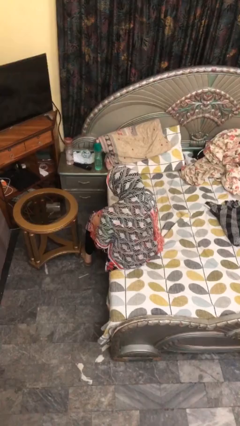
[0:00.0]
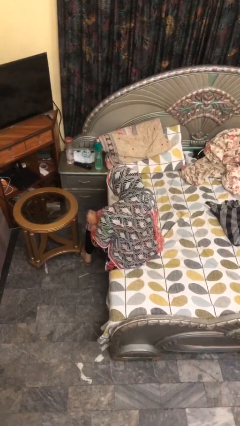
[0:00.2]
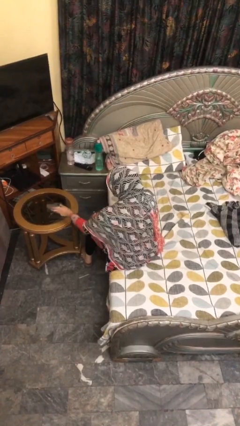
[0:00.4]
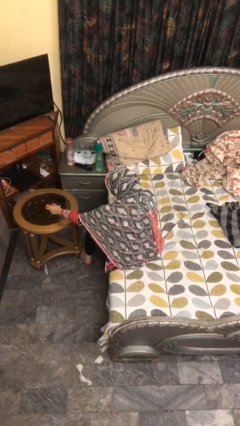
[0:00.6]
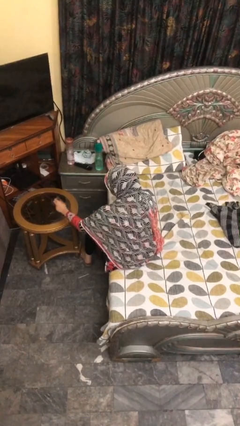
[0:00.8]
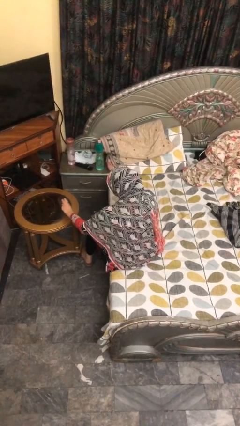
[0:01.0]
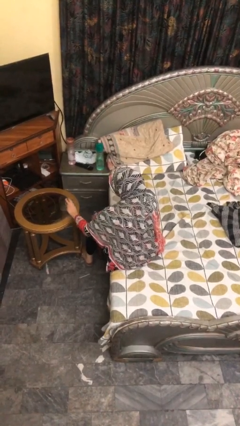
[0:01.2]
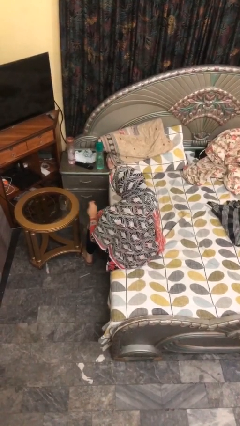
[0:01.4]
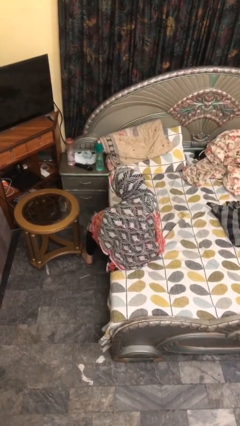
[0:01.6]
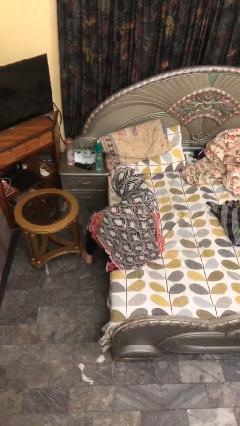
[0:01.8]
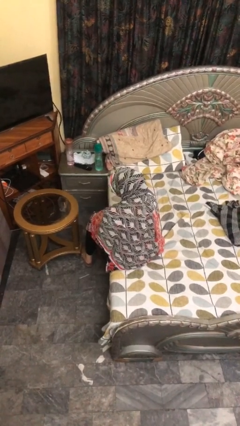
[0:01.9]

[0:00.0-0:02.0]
person sets upright glass

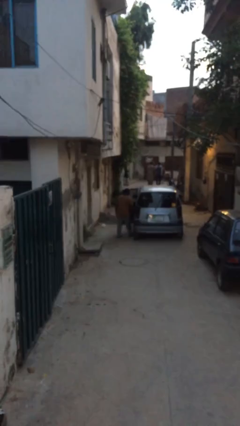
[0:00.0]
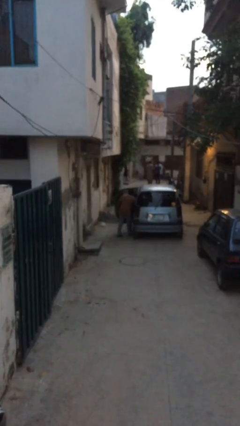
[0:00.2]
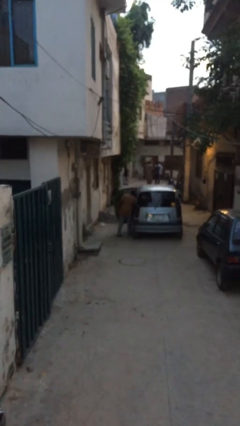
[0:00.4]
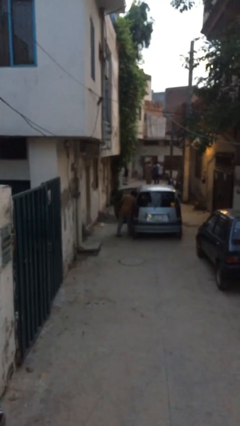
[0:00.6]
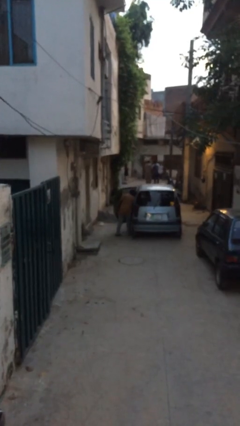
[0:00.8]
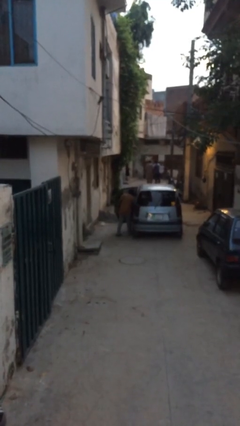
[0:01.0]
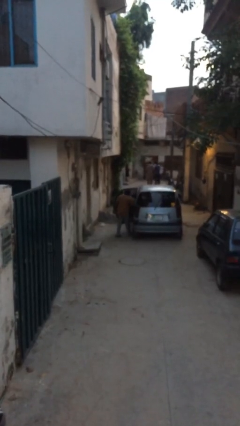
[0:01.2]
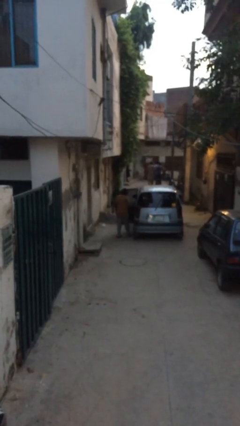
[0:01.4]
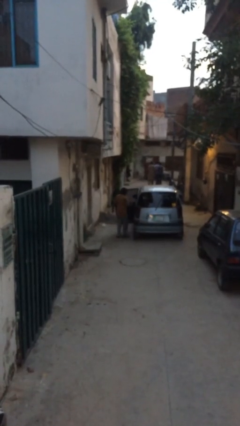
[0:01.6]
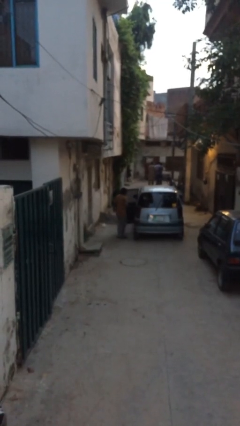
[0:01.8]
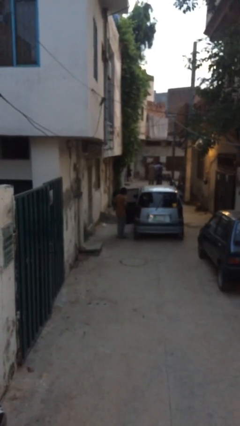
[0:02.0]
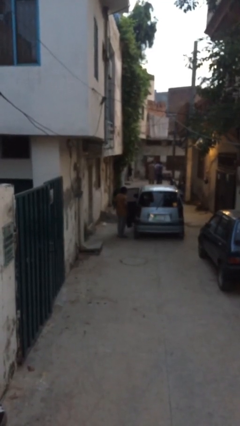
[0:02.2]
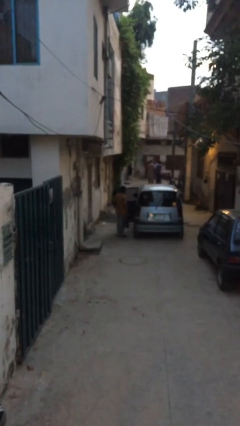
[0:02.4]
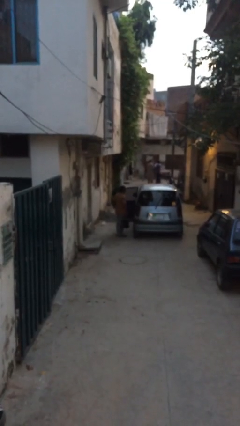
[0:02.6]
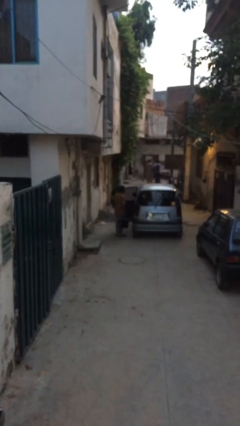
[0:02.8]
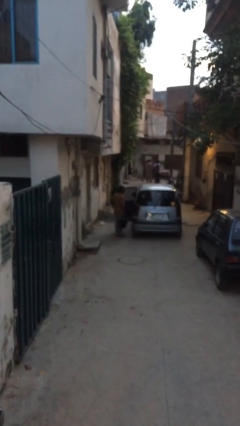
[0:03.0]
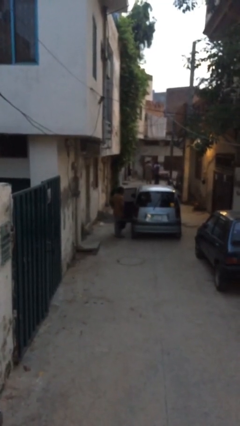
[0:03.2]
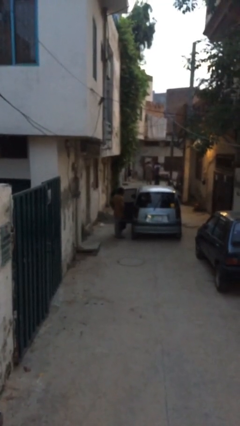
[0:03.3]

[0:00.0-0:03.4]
person unloads car

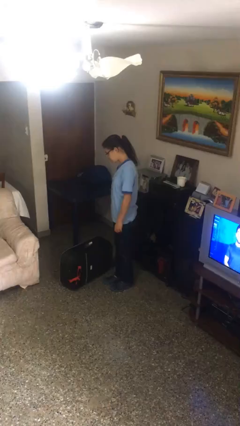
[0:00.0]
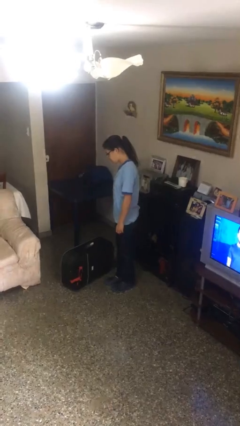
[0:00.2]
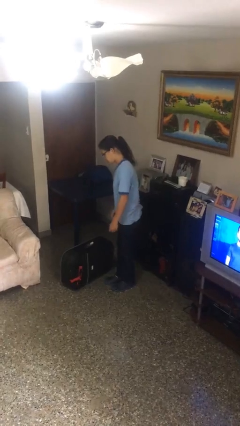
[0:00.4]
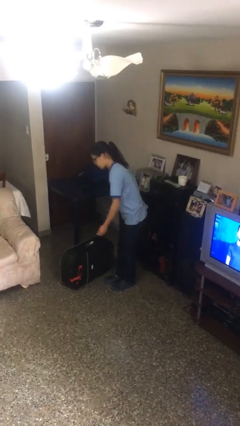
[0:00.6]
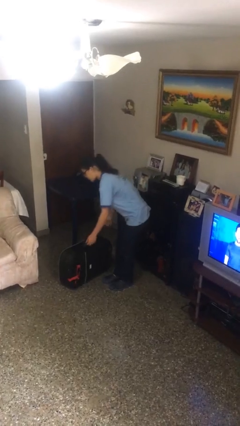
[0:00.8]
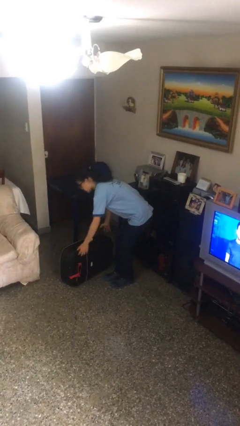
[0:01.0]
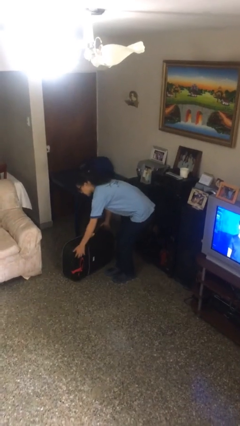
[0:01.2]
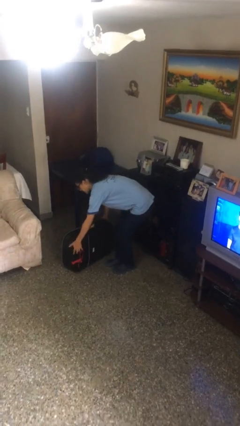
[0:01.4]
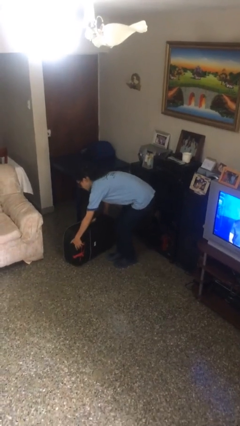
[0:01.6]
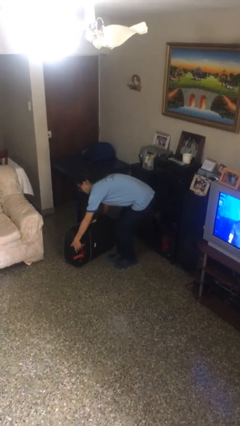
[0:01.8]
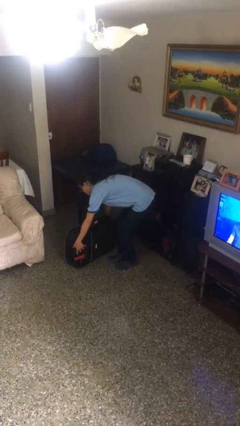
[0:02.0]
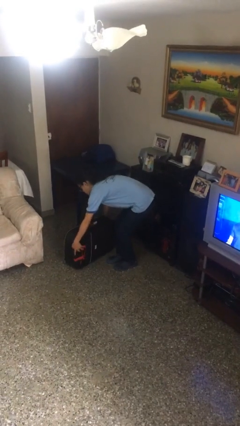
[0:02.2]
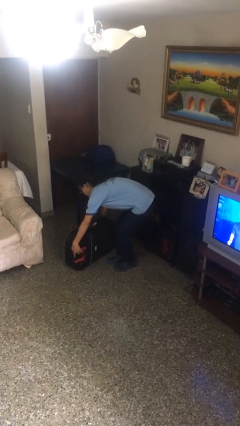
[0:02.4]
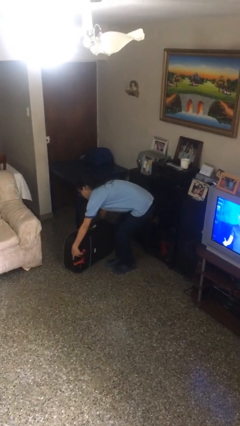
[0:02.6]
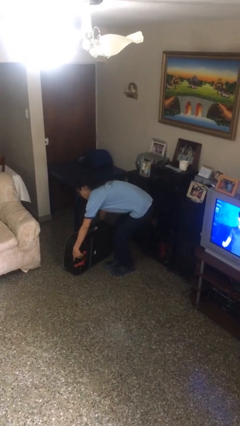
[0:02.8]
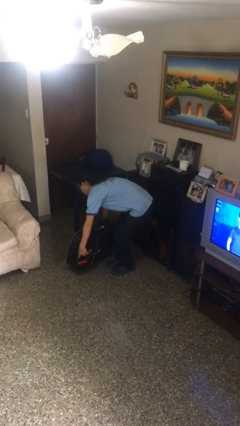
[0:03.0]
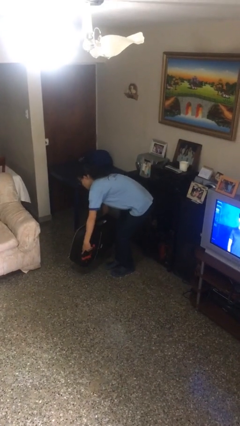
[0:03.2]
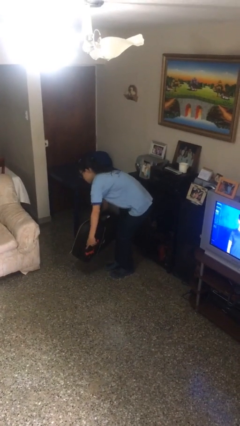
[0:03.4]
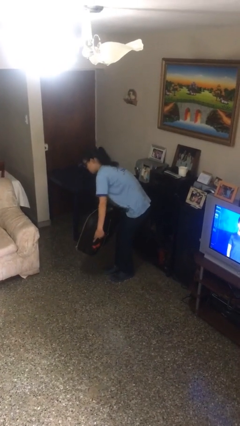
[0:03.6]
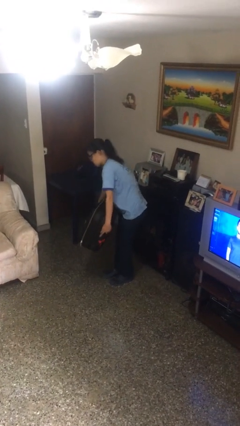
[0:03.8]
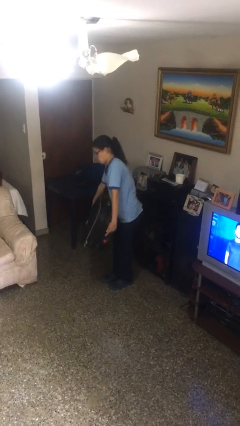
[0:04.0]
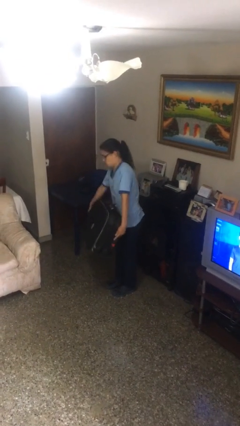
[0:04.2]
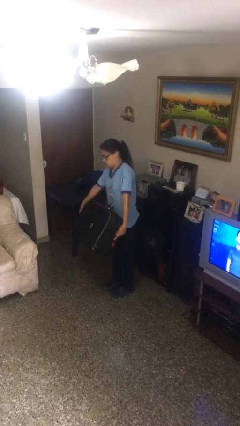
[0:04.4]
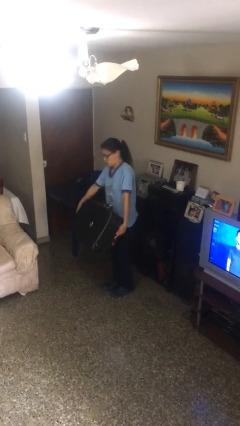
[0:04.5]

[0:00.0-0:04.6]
person picks up object from floor

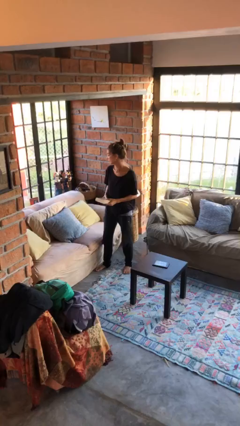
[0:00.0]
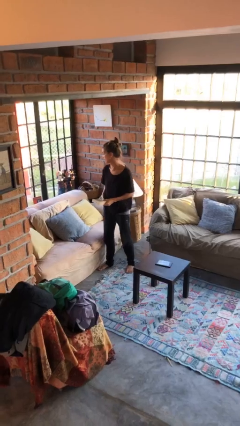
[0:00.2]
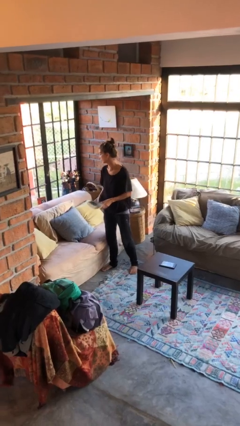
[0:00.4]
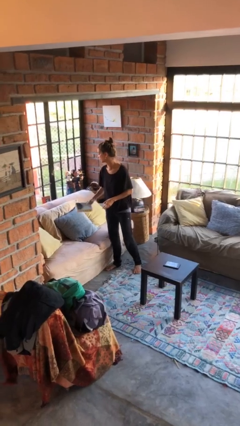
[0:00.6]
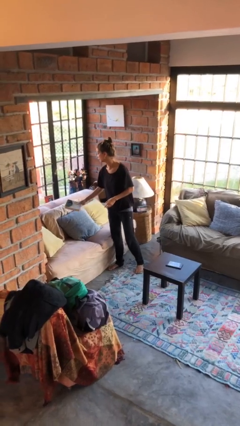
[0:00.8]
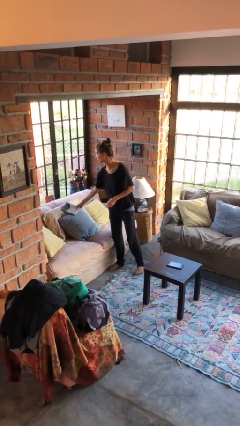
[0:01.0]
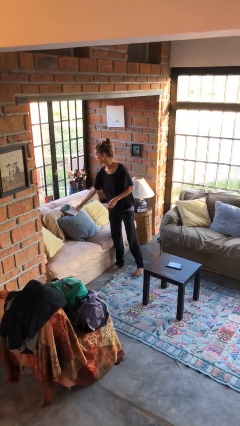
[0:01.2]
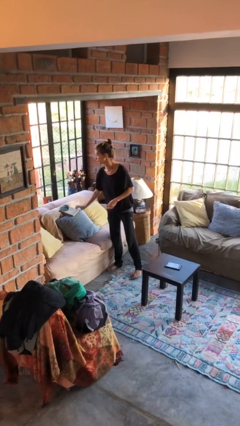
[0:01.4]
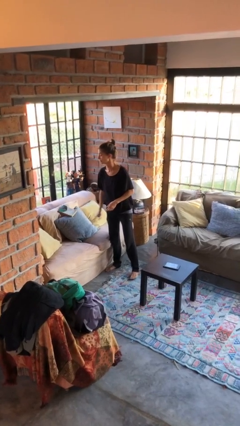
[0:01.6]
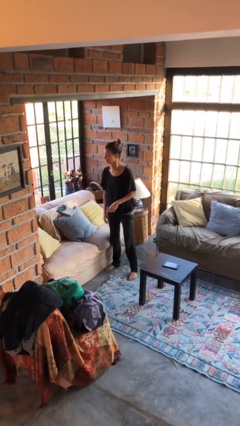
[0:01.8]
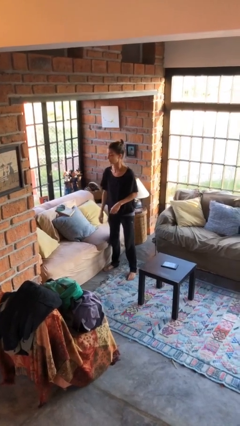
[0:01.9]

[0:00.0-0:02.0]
person puts down object on couch

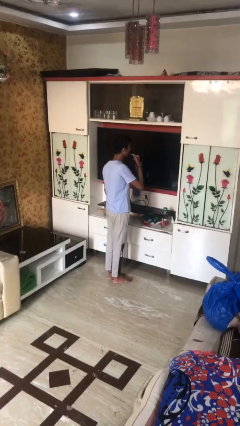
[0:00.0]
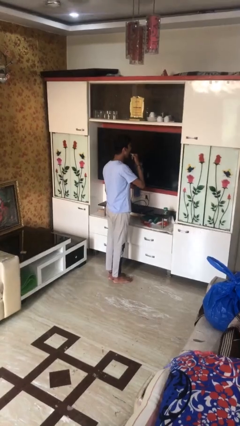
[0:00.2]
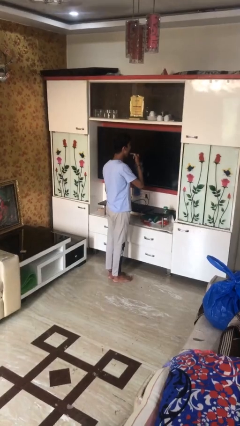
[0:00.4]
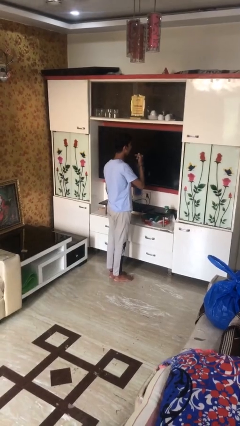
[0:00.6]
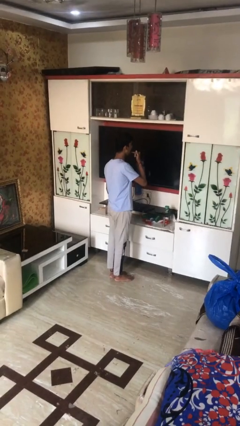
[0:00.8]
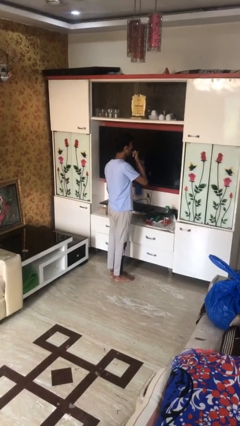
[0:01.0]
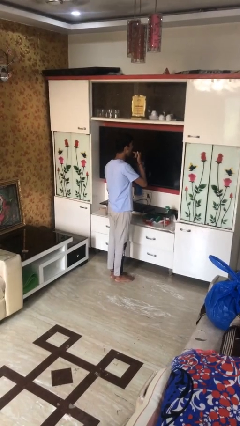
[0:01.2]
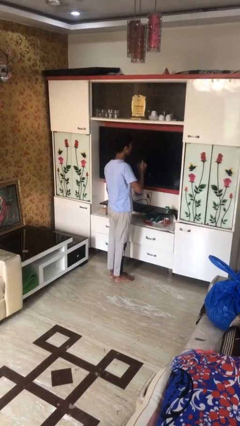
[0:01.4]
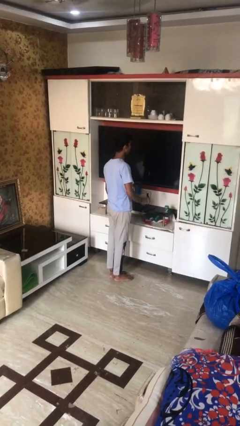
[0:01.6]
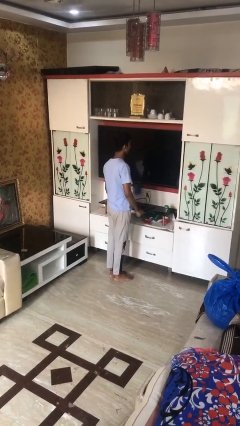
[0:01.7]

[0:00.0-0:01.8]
person licks fingers

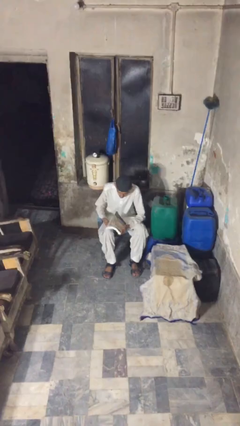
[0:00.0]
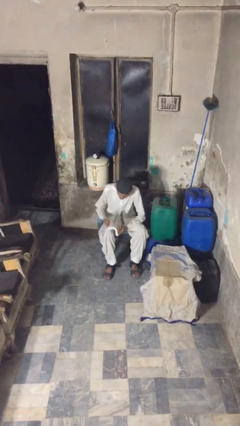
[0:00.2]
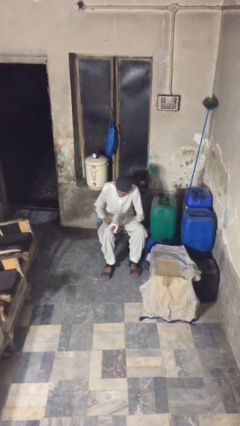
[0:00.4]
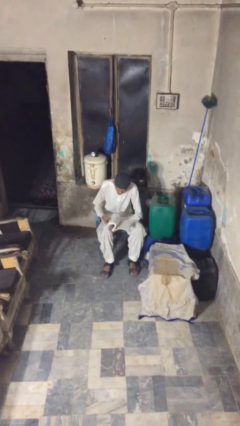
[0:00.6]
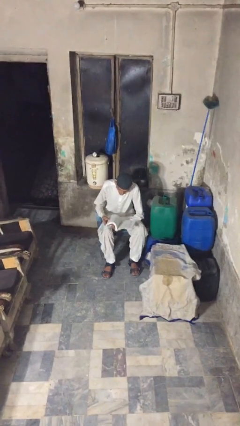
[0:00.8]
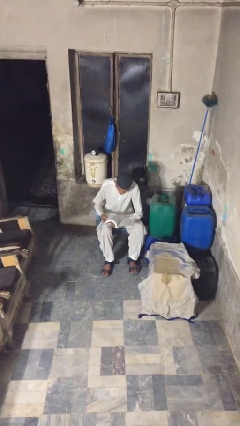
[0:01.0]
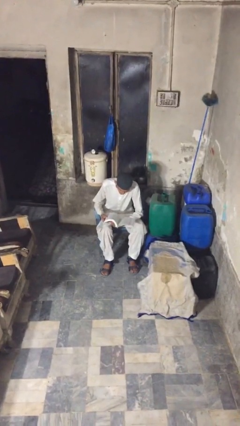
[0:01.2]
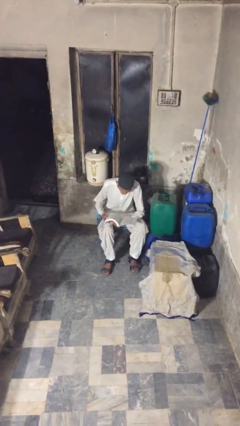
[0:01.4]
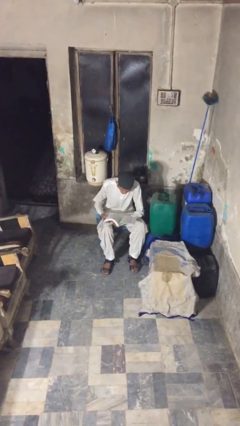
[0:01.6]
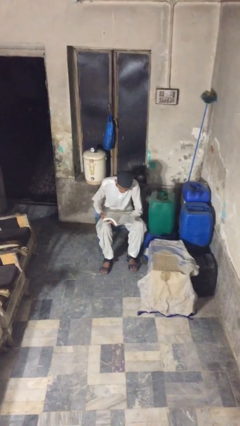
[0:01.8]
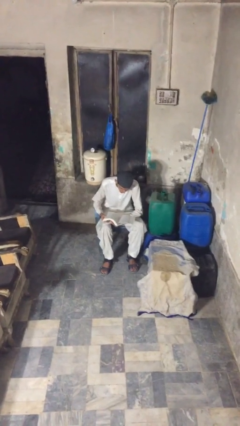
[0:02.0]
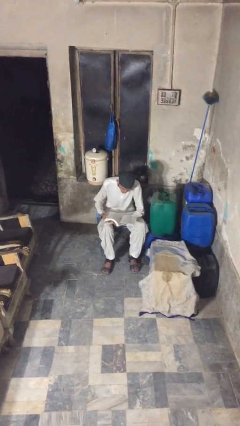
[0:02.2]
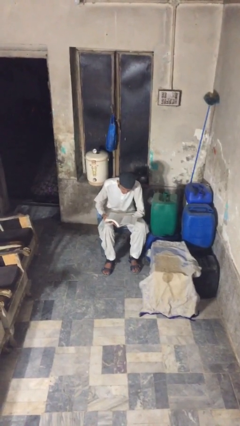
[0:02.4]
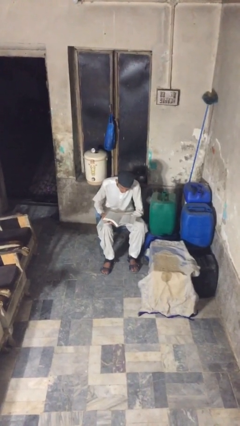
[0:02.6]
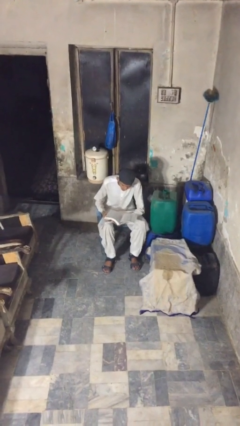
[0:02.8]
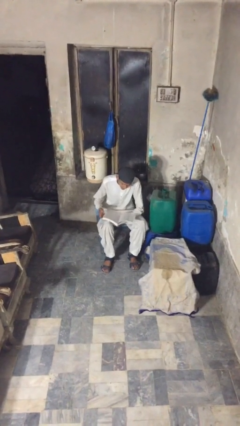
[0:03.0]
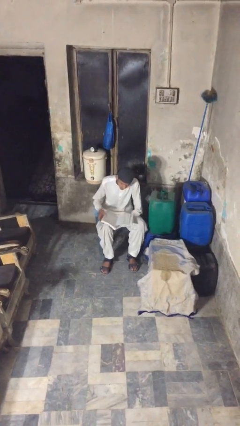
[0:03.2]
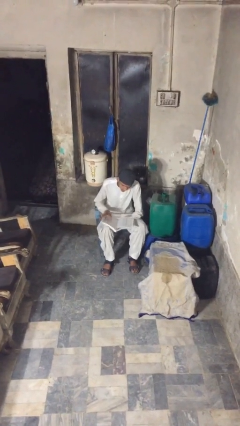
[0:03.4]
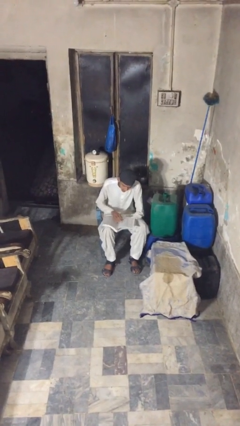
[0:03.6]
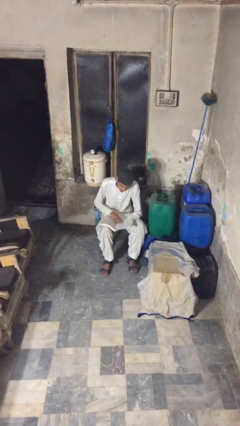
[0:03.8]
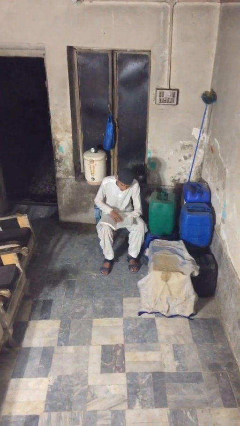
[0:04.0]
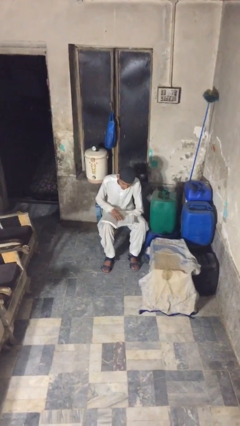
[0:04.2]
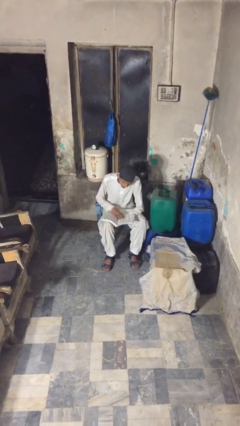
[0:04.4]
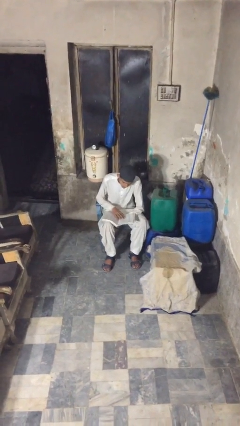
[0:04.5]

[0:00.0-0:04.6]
person reads document
